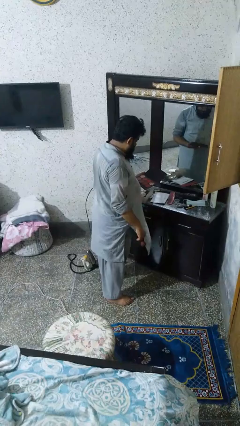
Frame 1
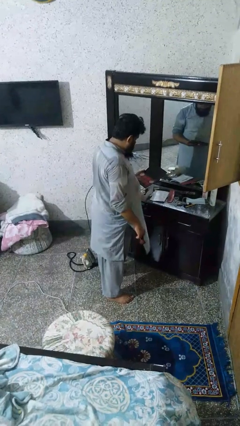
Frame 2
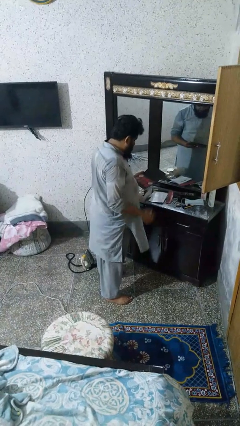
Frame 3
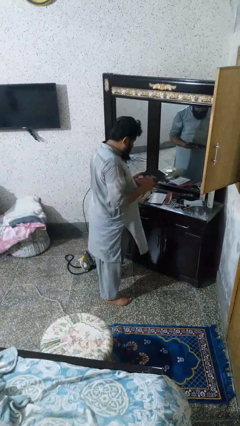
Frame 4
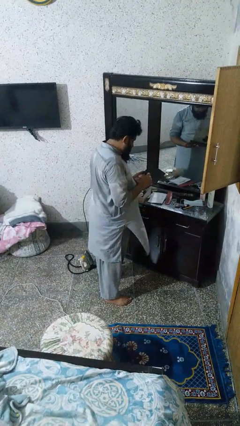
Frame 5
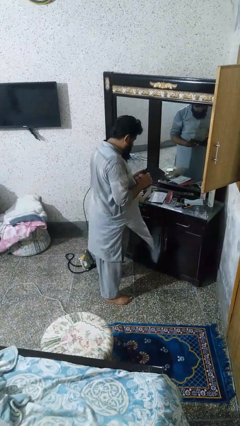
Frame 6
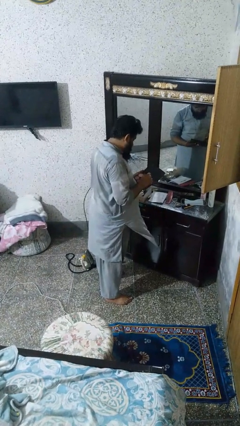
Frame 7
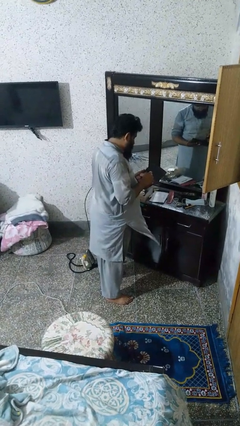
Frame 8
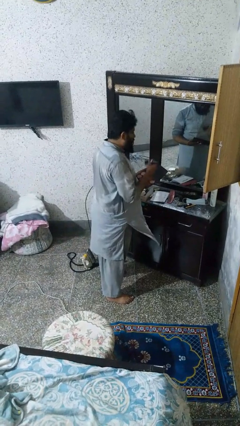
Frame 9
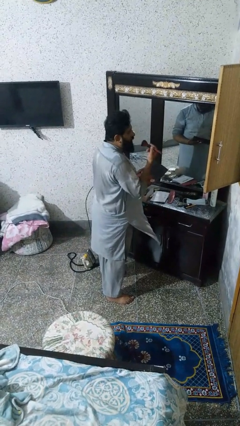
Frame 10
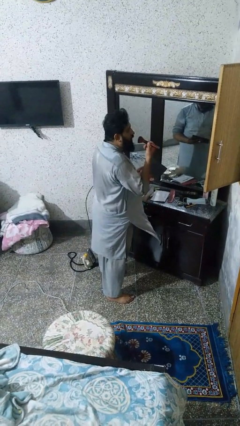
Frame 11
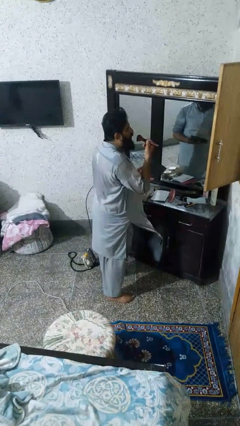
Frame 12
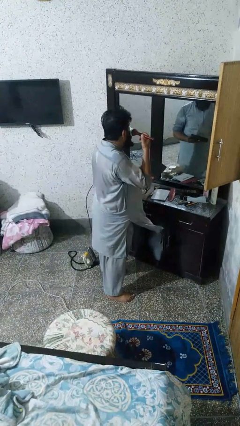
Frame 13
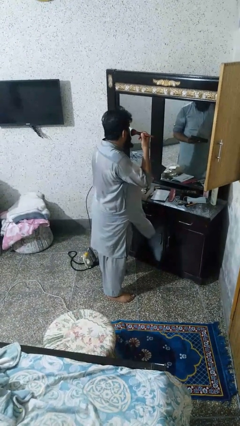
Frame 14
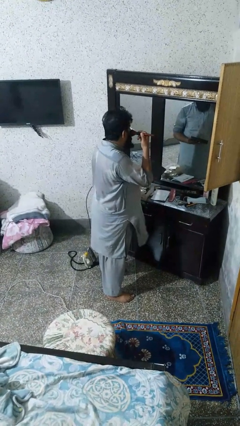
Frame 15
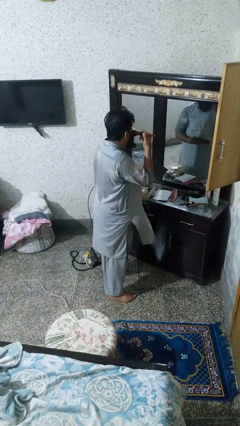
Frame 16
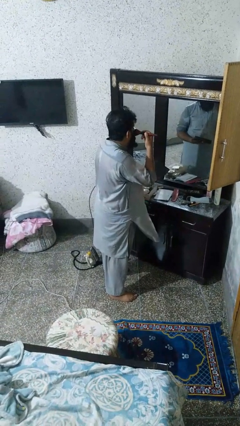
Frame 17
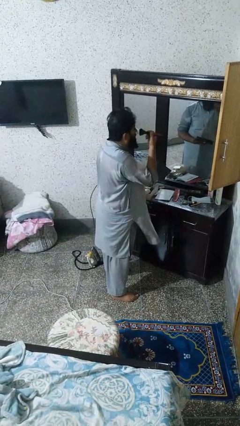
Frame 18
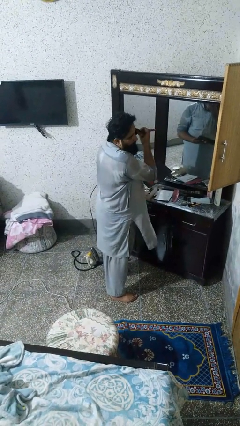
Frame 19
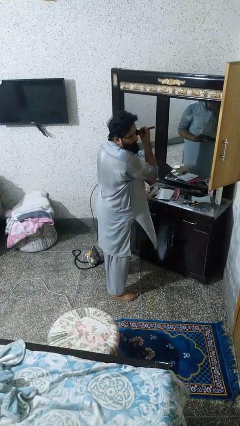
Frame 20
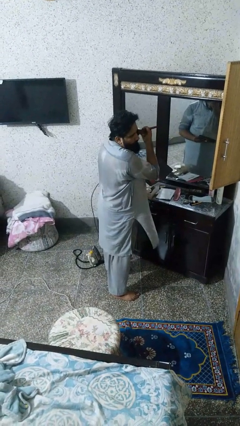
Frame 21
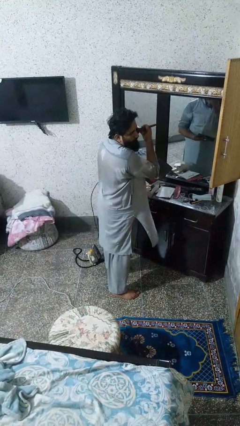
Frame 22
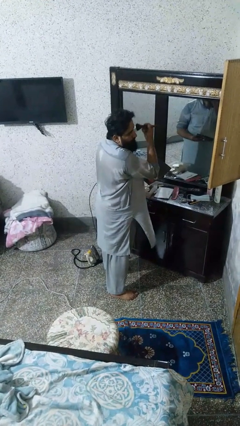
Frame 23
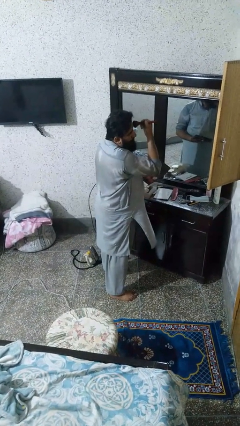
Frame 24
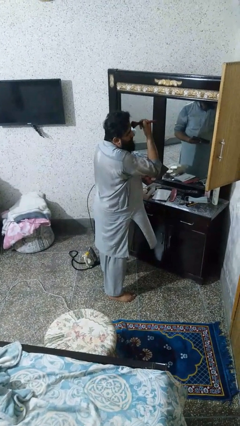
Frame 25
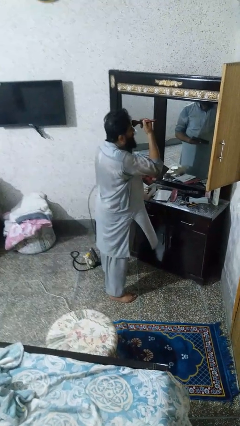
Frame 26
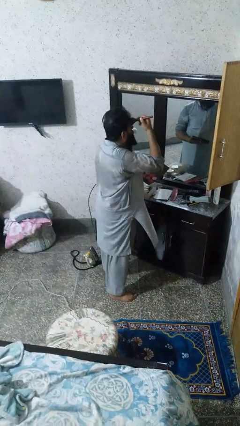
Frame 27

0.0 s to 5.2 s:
person applies foundation makeup

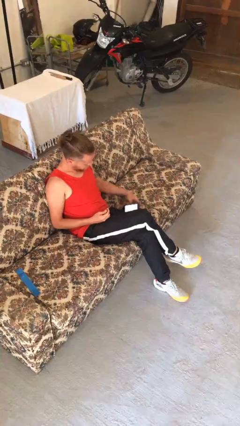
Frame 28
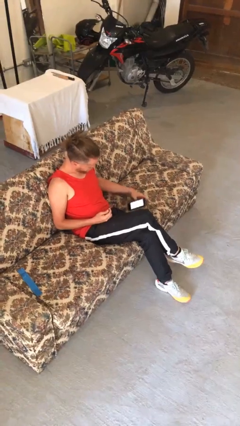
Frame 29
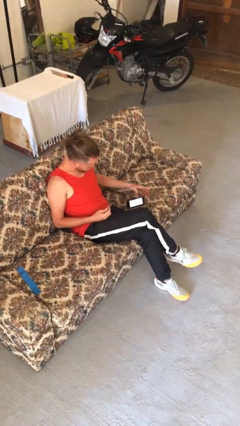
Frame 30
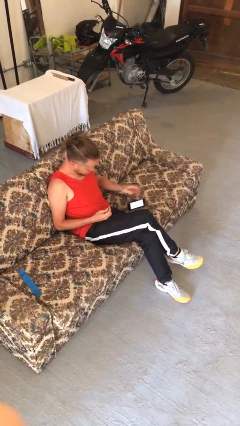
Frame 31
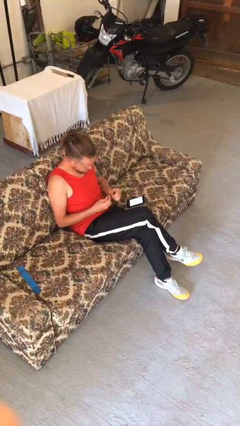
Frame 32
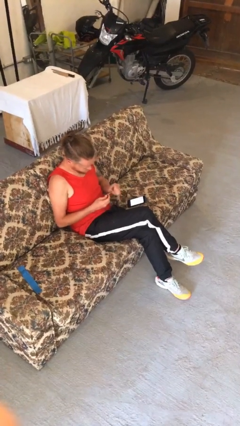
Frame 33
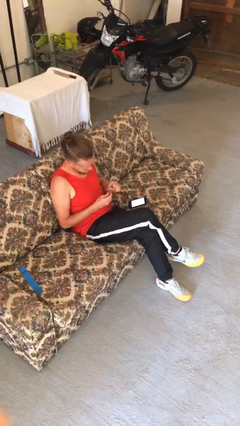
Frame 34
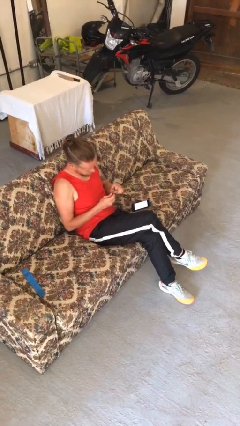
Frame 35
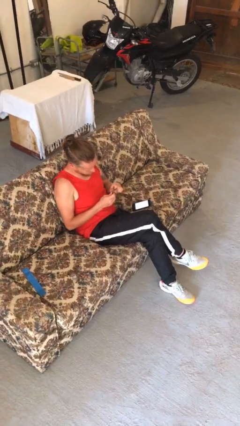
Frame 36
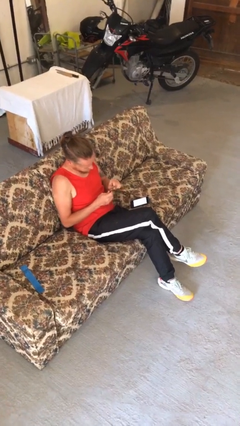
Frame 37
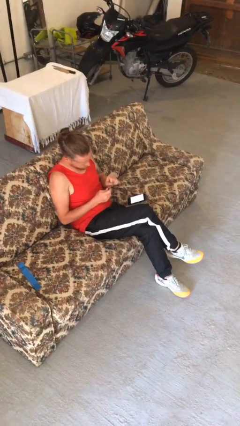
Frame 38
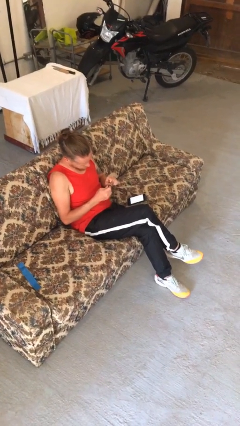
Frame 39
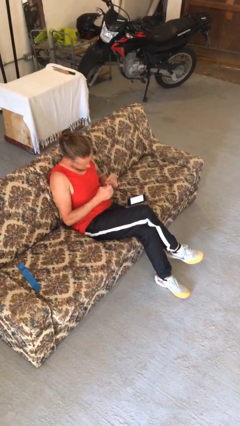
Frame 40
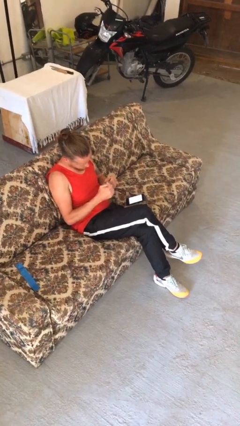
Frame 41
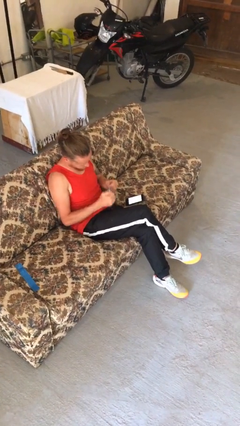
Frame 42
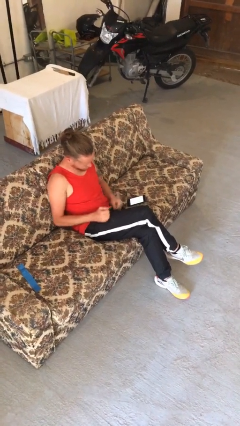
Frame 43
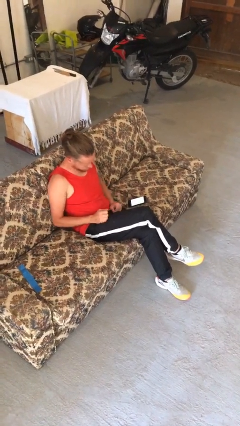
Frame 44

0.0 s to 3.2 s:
person files fingernails

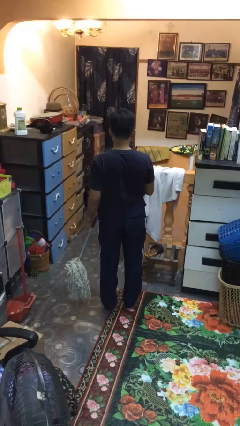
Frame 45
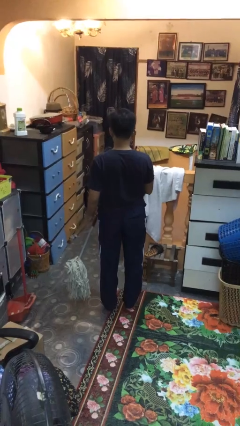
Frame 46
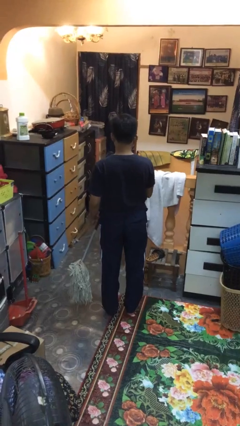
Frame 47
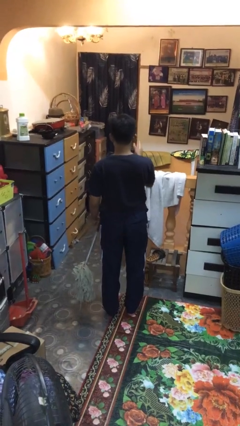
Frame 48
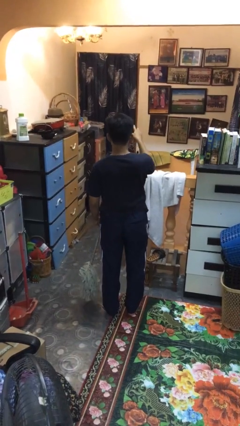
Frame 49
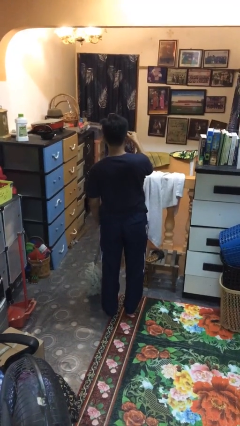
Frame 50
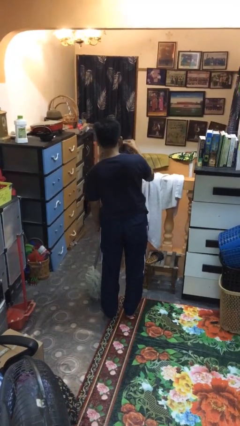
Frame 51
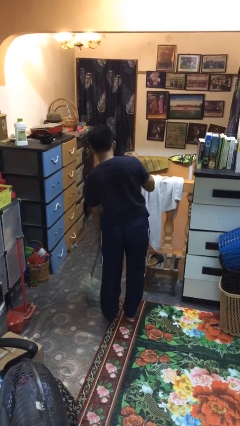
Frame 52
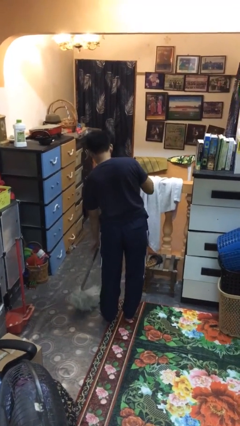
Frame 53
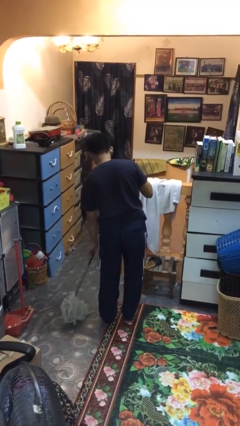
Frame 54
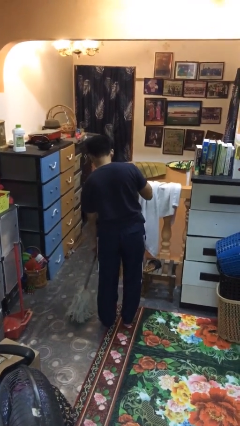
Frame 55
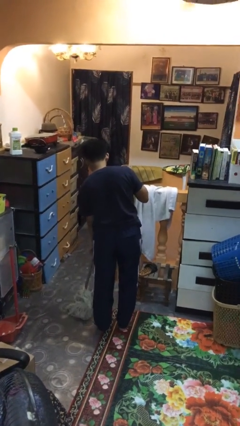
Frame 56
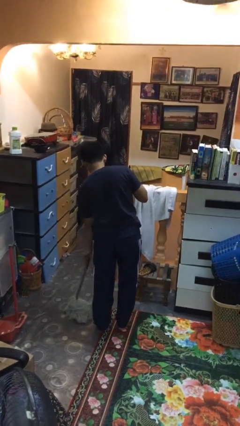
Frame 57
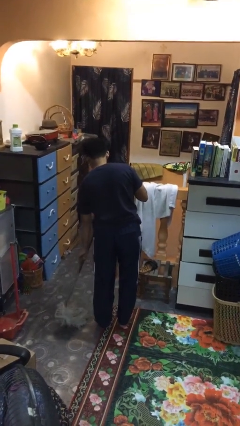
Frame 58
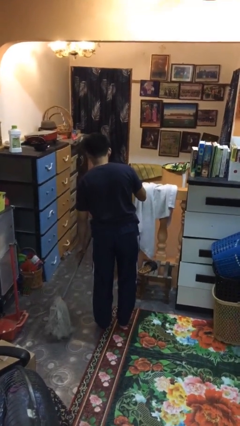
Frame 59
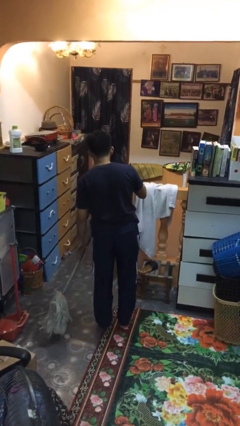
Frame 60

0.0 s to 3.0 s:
person mops

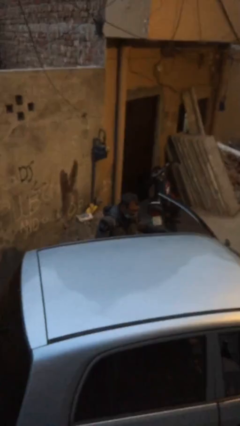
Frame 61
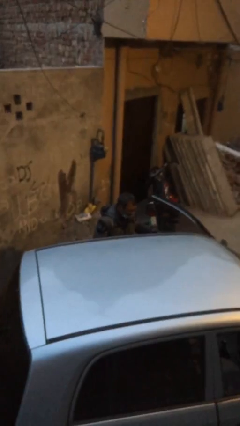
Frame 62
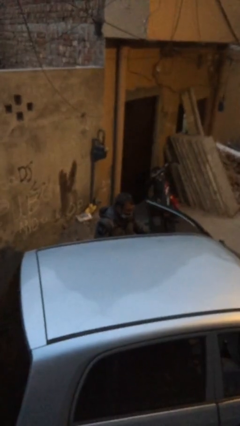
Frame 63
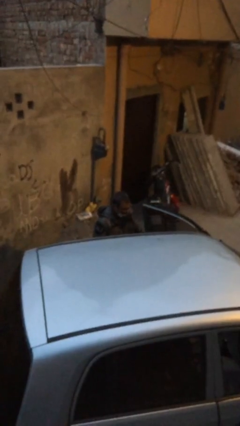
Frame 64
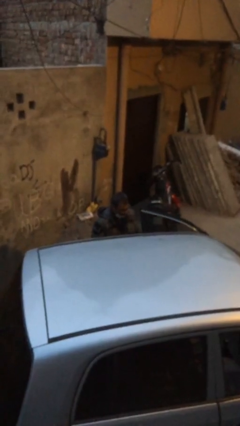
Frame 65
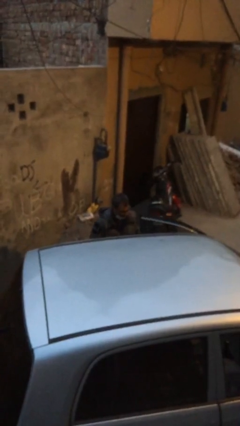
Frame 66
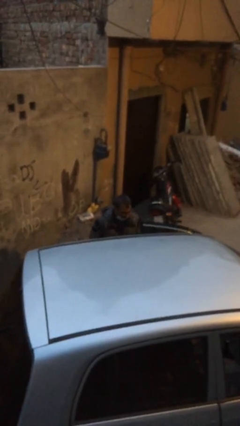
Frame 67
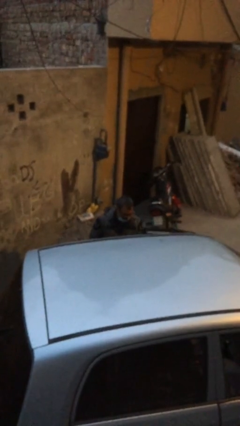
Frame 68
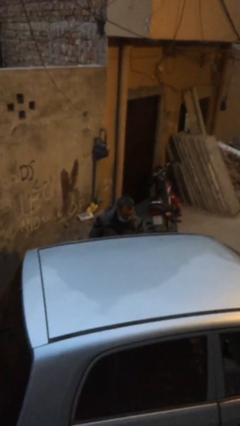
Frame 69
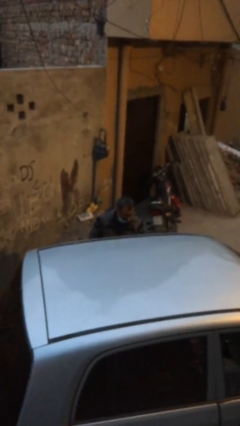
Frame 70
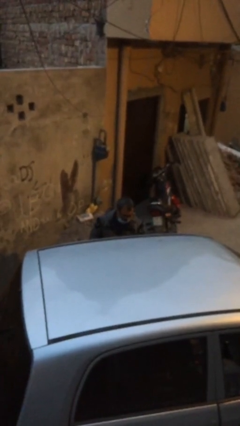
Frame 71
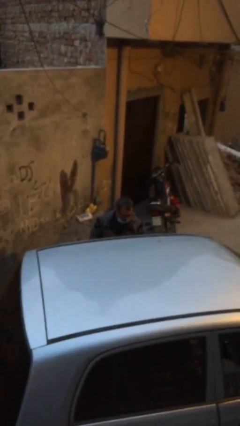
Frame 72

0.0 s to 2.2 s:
person closes car door

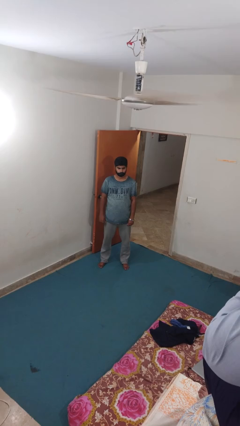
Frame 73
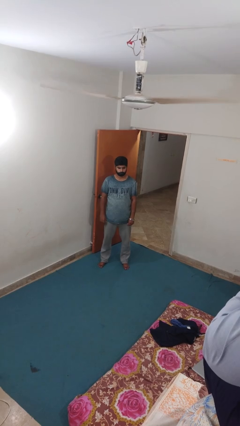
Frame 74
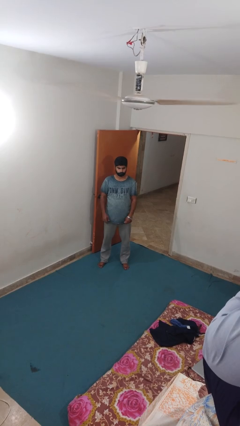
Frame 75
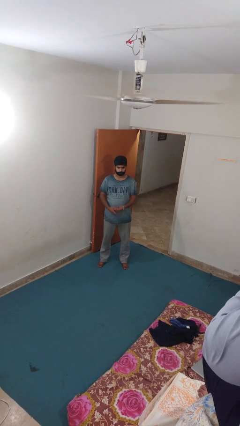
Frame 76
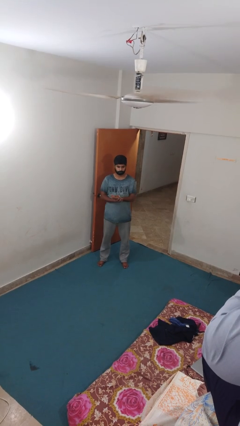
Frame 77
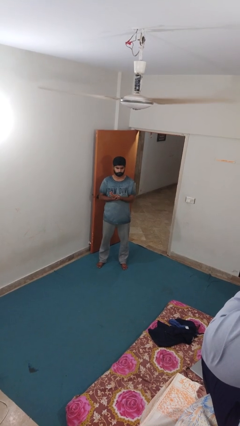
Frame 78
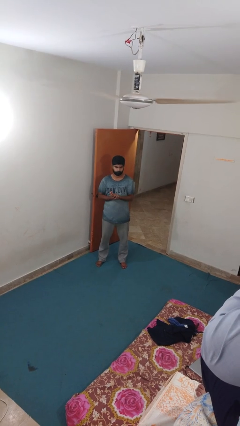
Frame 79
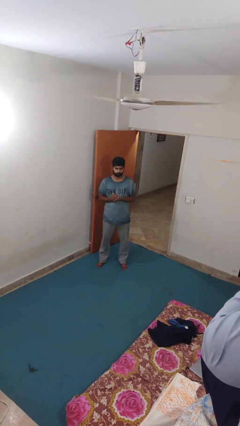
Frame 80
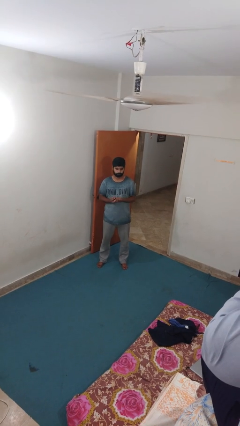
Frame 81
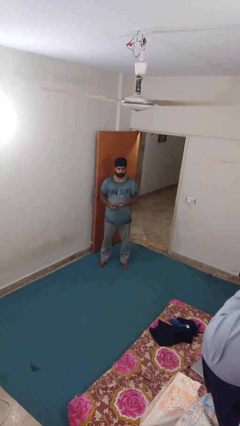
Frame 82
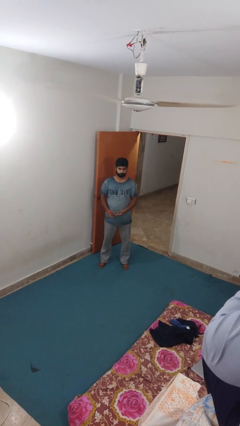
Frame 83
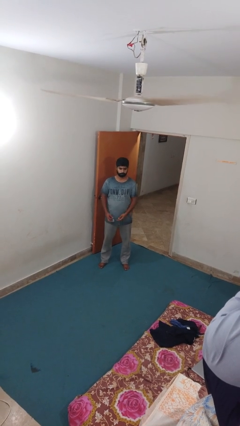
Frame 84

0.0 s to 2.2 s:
person takes off wristwatch

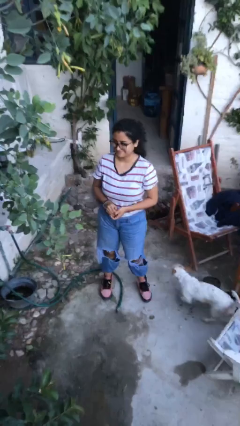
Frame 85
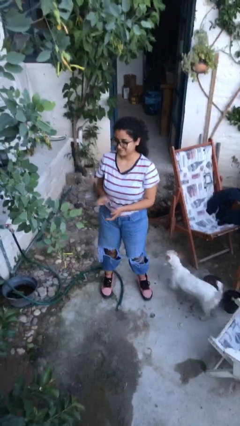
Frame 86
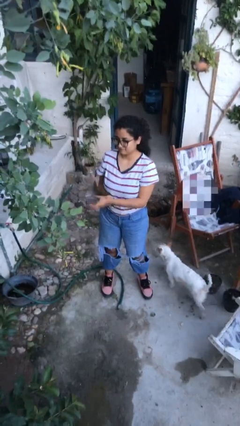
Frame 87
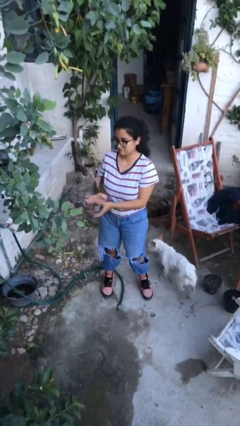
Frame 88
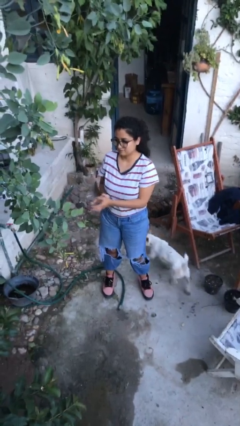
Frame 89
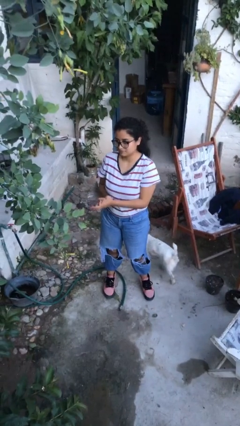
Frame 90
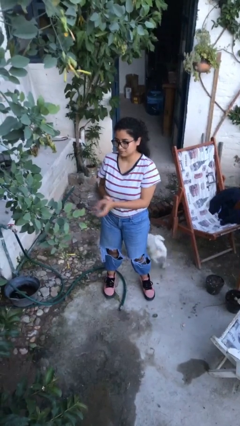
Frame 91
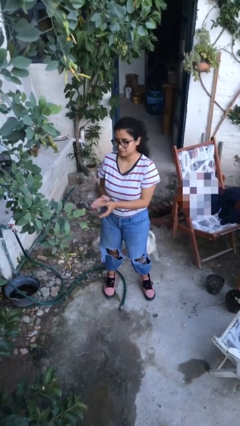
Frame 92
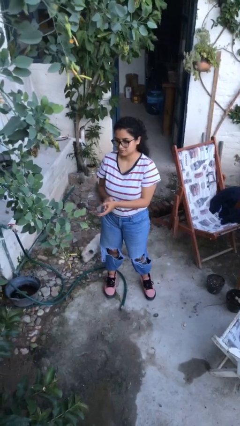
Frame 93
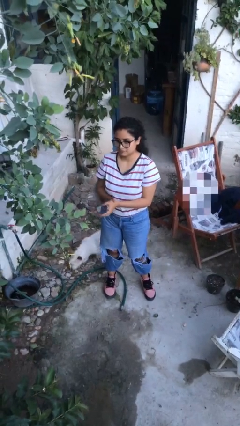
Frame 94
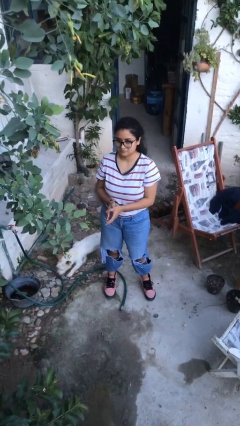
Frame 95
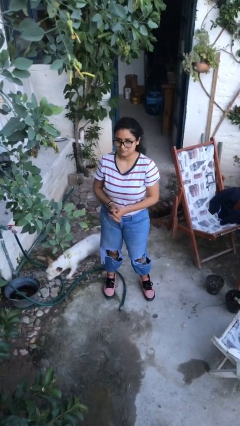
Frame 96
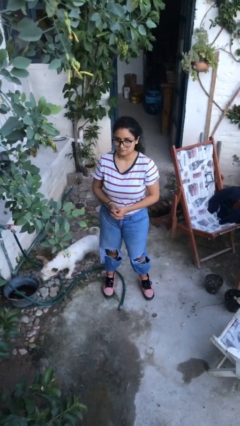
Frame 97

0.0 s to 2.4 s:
person claps hands
